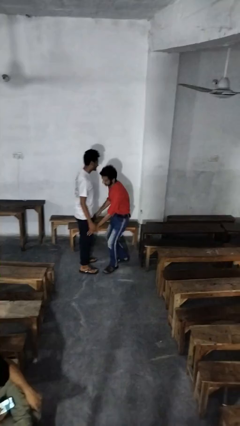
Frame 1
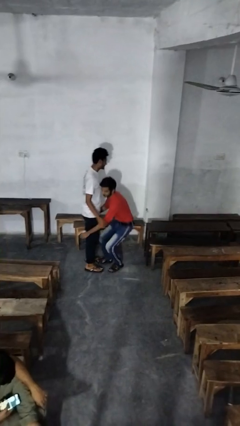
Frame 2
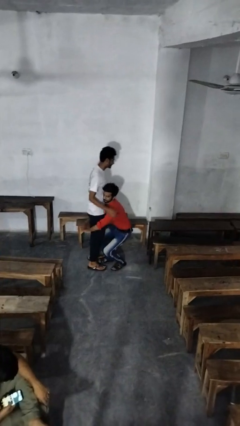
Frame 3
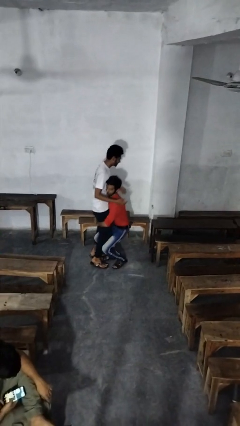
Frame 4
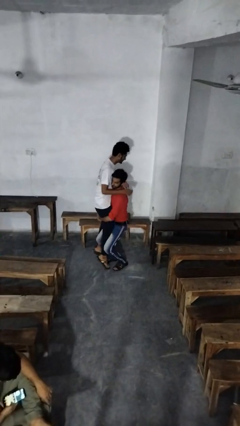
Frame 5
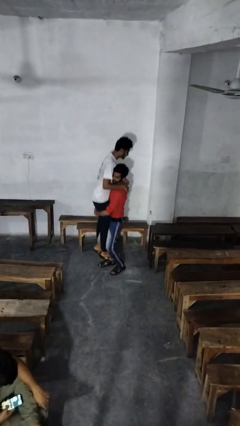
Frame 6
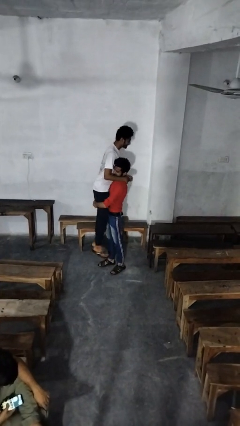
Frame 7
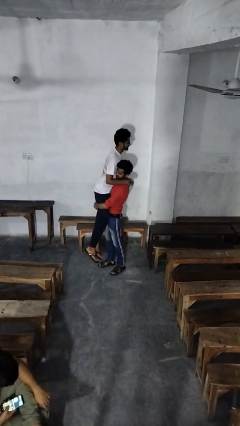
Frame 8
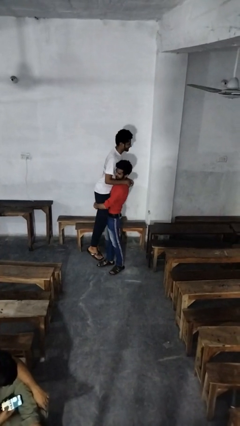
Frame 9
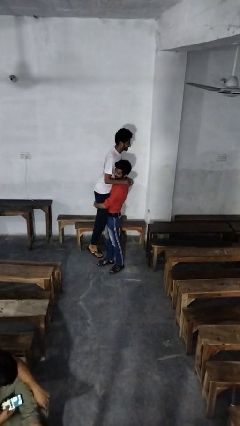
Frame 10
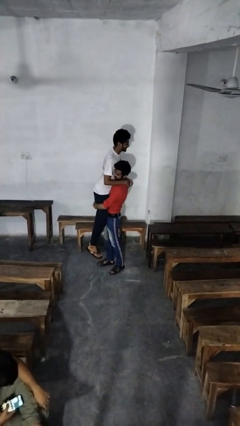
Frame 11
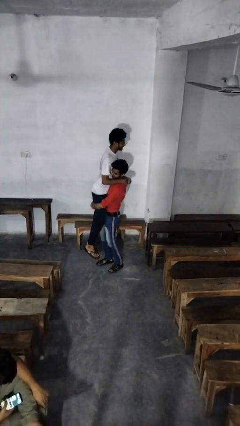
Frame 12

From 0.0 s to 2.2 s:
person picks up person

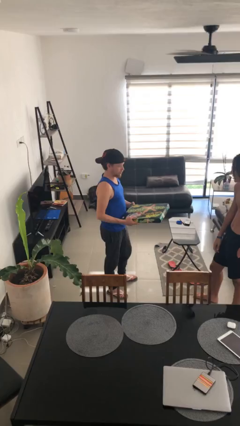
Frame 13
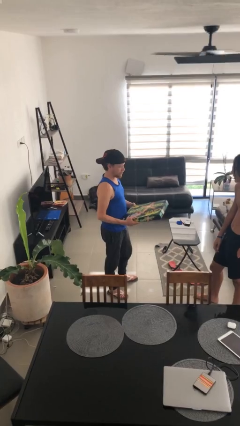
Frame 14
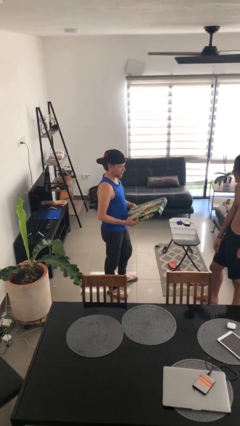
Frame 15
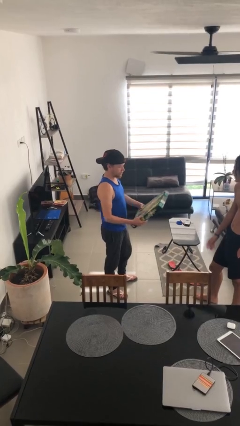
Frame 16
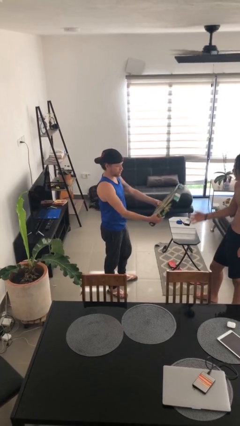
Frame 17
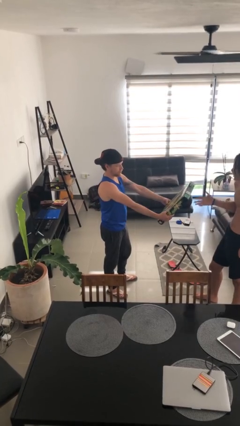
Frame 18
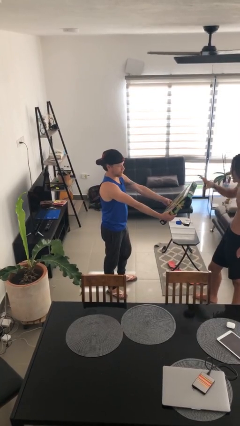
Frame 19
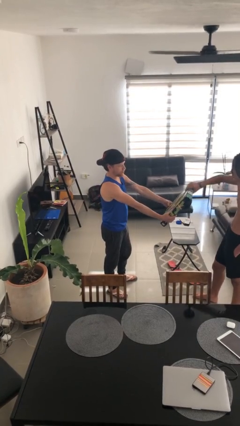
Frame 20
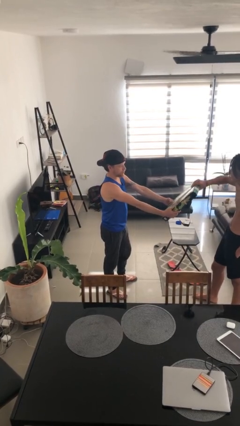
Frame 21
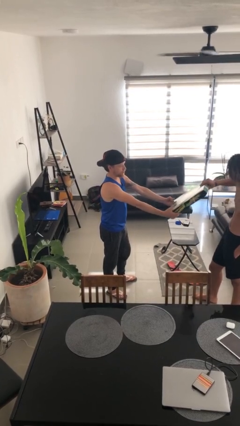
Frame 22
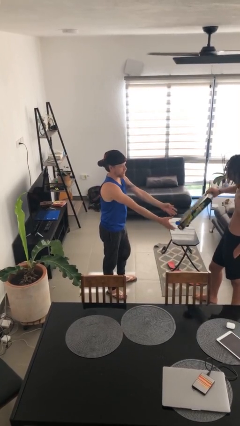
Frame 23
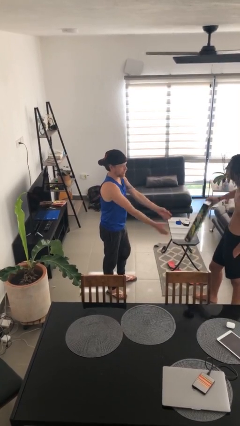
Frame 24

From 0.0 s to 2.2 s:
person transfers object to person

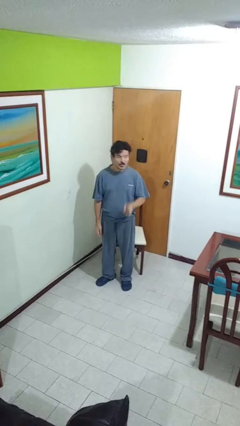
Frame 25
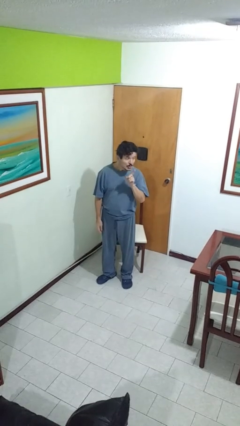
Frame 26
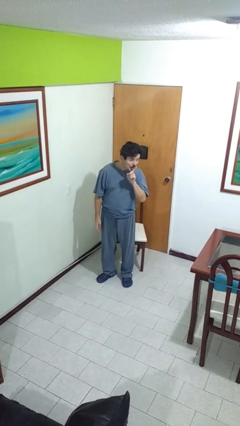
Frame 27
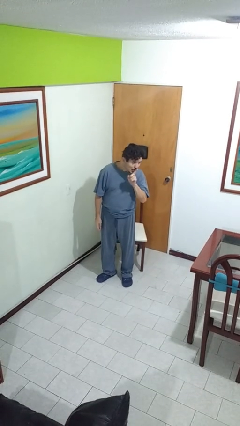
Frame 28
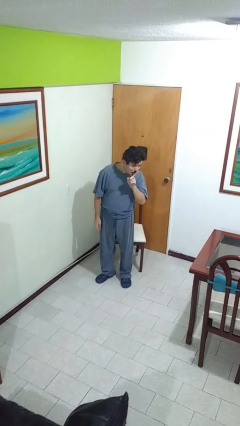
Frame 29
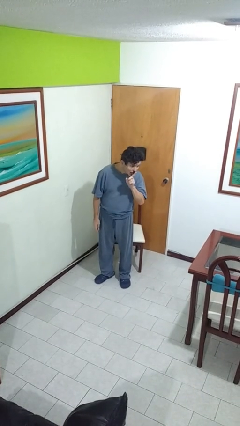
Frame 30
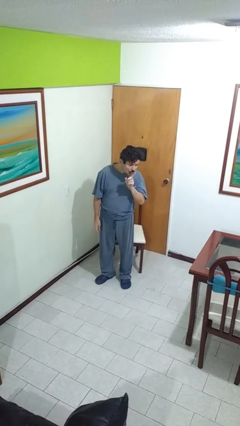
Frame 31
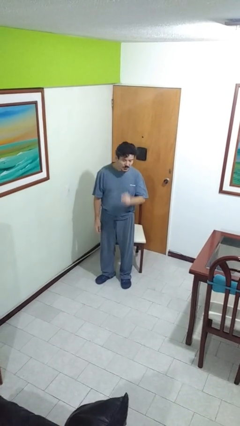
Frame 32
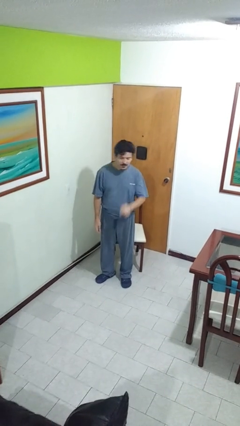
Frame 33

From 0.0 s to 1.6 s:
person gestures be quiet

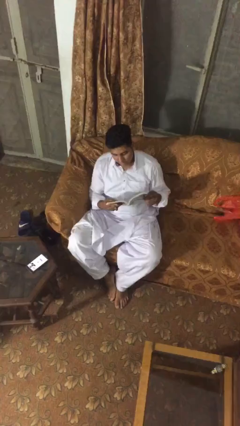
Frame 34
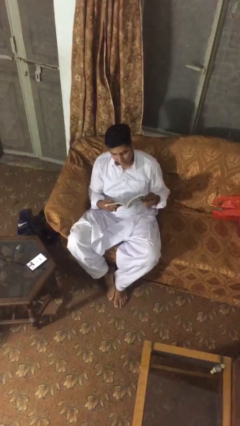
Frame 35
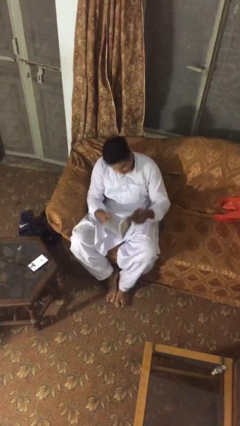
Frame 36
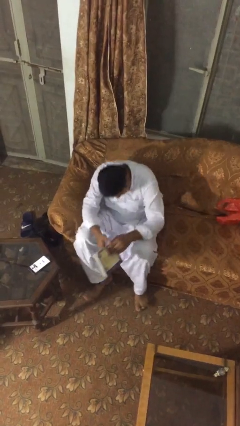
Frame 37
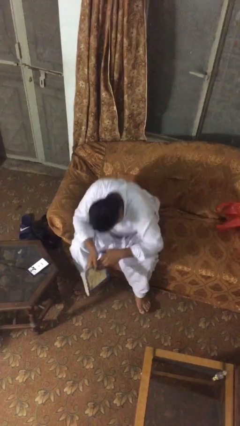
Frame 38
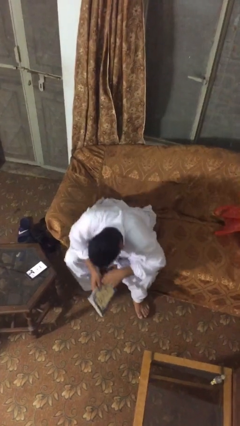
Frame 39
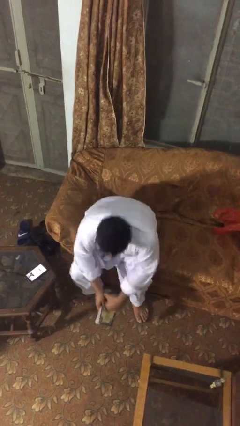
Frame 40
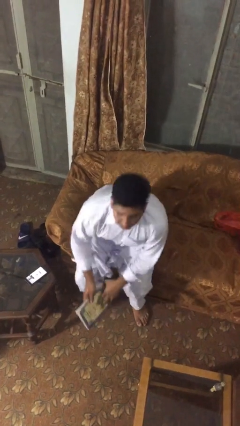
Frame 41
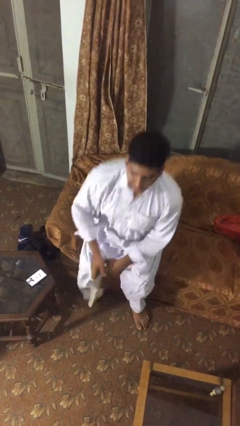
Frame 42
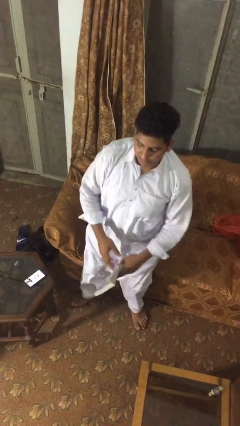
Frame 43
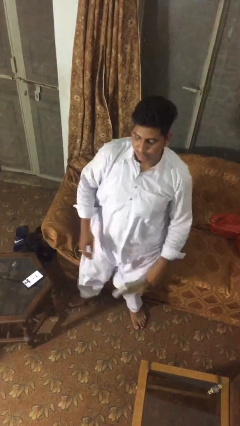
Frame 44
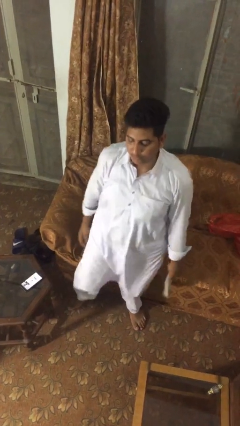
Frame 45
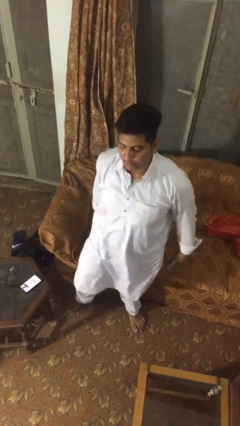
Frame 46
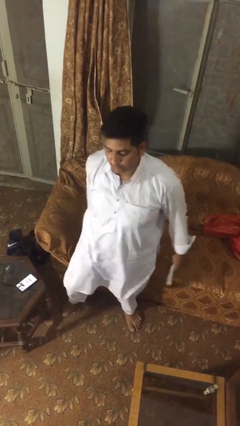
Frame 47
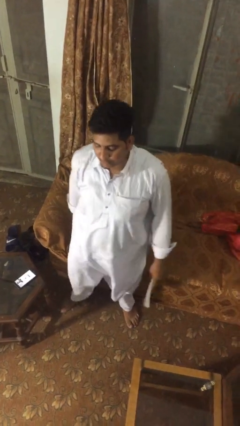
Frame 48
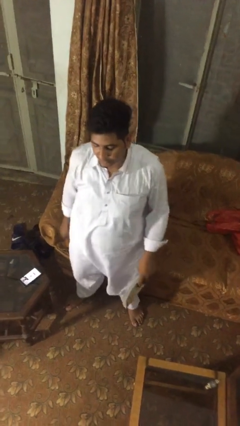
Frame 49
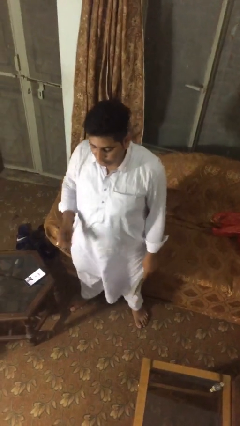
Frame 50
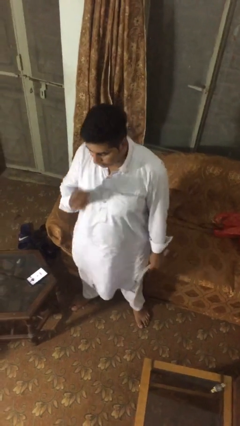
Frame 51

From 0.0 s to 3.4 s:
person stands up

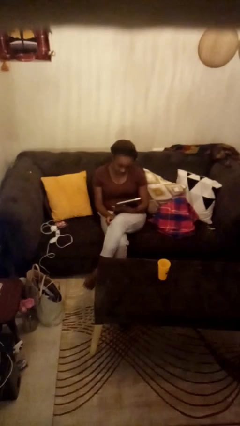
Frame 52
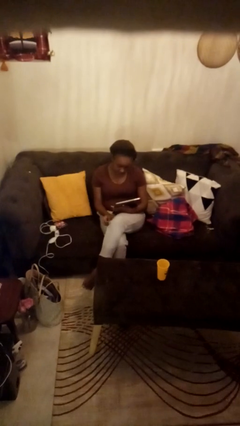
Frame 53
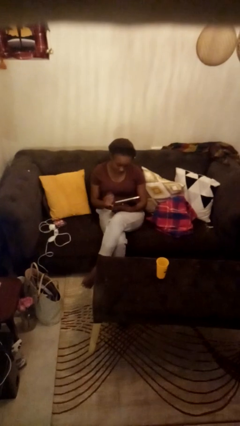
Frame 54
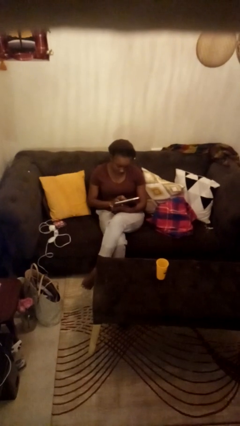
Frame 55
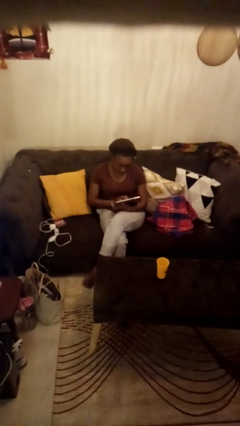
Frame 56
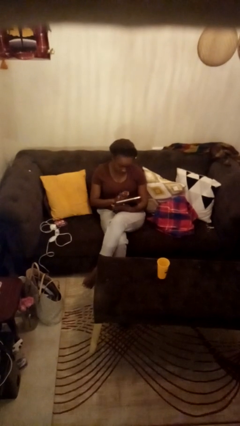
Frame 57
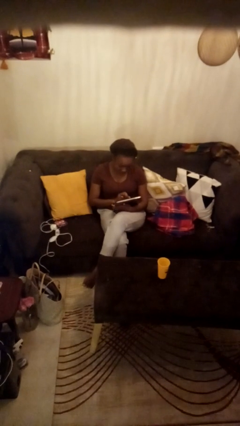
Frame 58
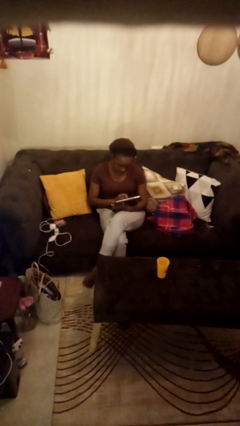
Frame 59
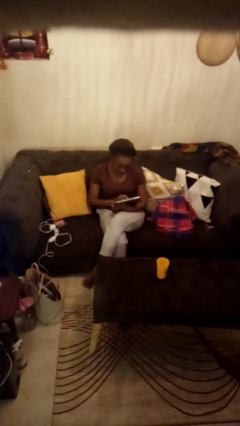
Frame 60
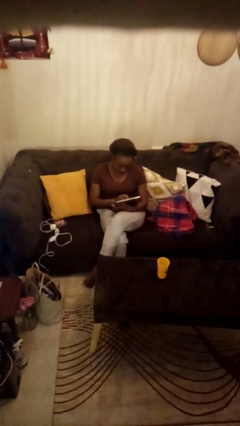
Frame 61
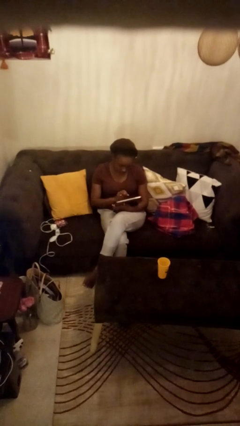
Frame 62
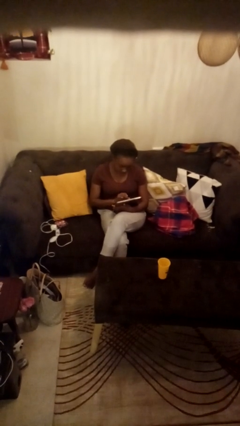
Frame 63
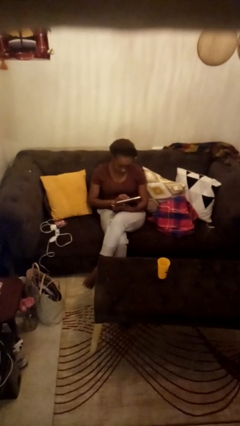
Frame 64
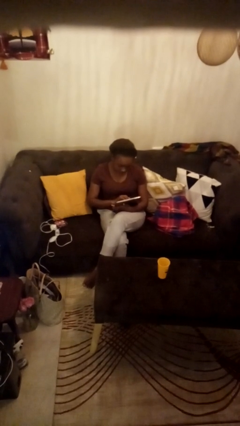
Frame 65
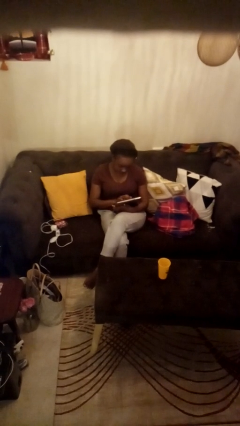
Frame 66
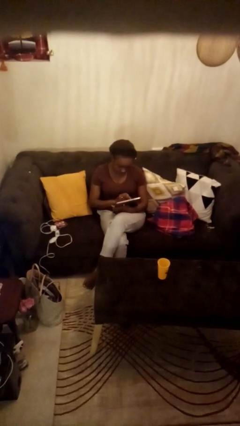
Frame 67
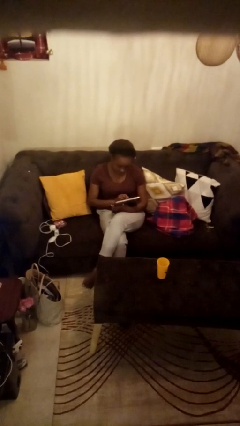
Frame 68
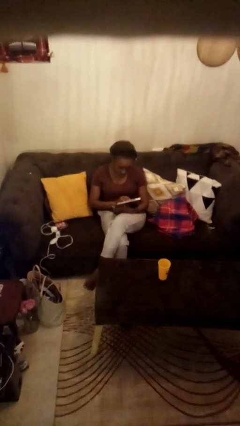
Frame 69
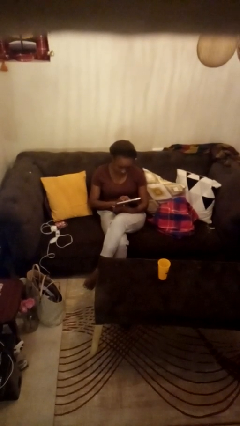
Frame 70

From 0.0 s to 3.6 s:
person interacts with tablet

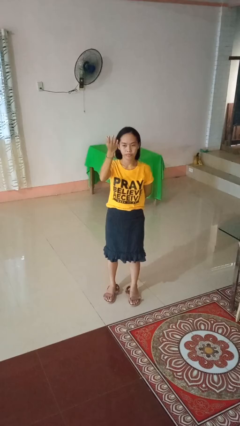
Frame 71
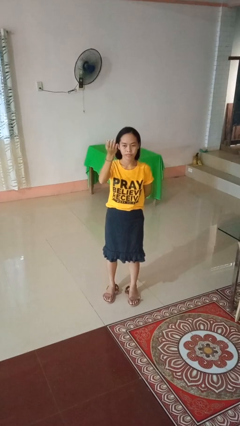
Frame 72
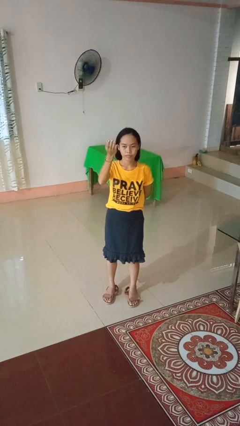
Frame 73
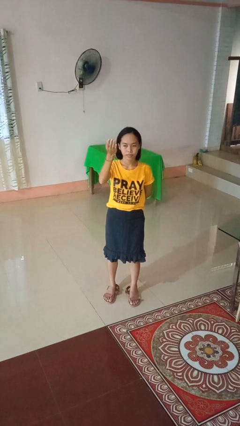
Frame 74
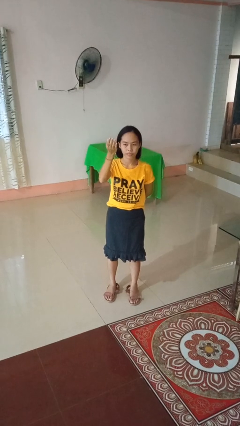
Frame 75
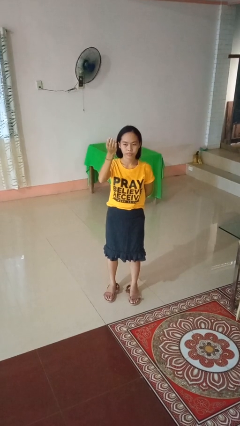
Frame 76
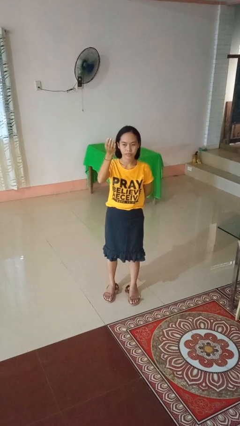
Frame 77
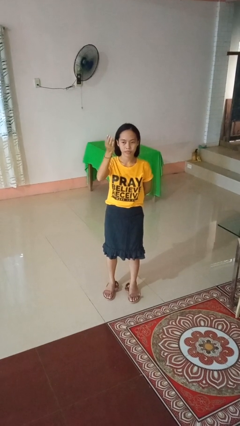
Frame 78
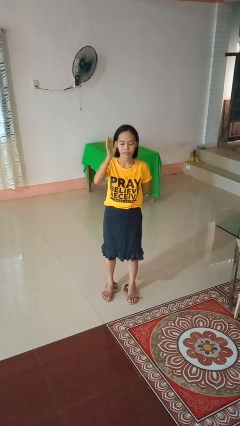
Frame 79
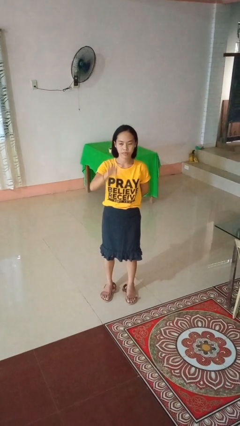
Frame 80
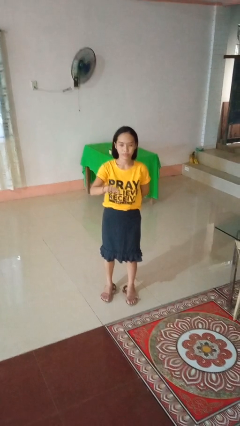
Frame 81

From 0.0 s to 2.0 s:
person gestures swipe up

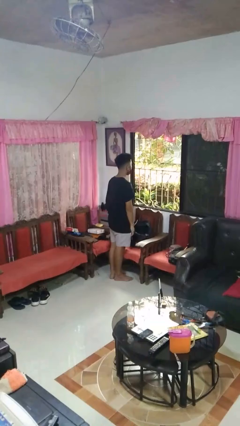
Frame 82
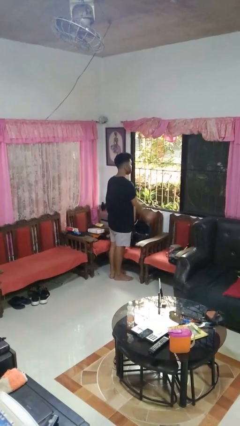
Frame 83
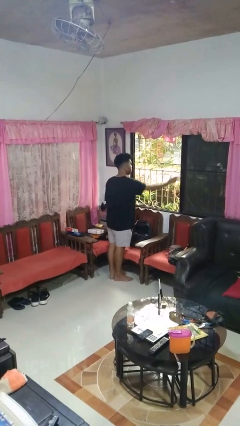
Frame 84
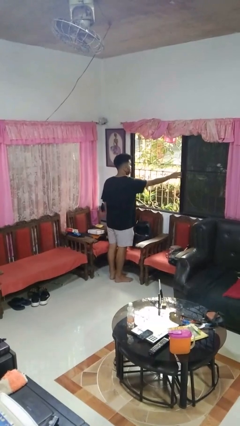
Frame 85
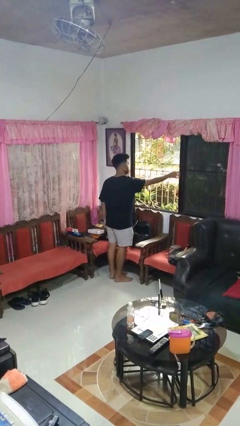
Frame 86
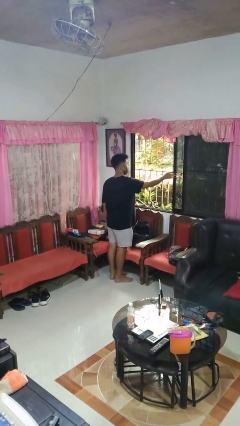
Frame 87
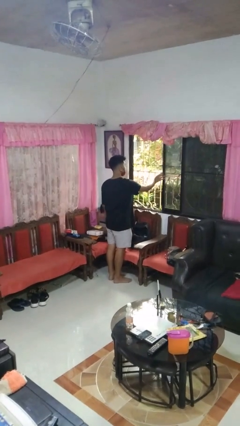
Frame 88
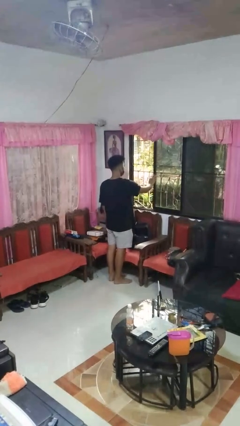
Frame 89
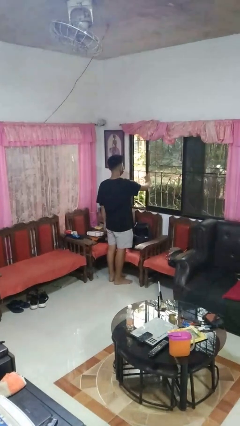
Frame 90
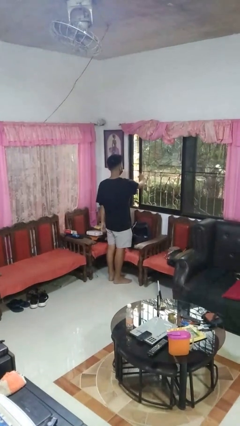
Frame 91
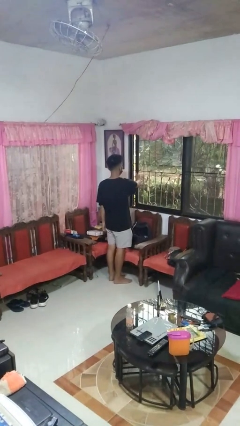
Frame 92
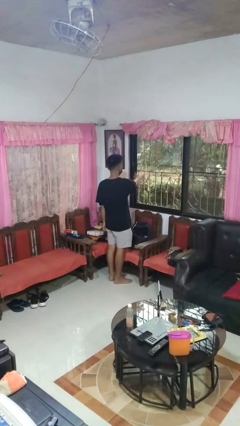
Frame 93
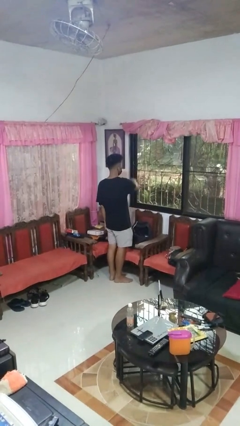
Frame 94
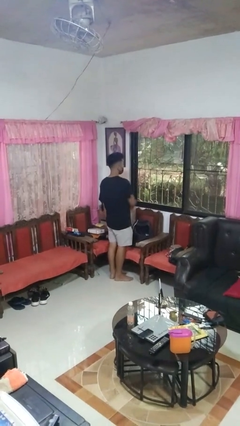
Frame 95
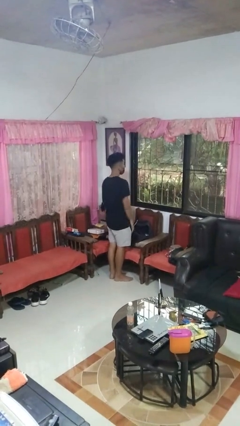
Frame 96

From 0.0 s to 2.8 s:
person closes home window
